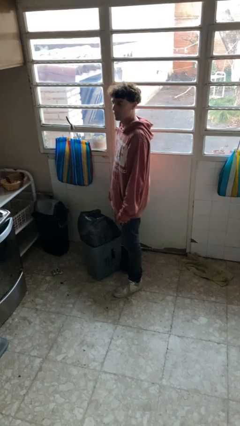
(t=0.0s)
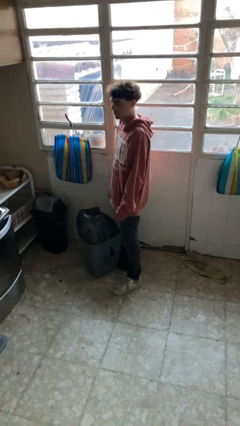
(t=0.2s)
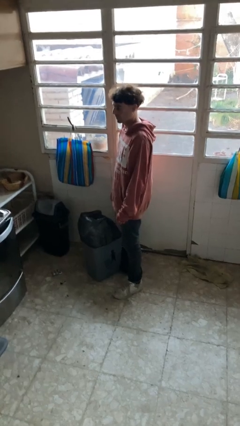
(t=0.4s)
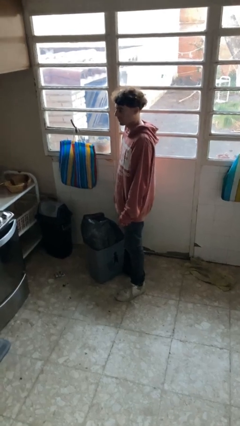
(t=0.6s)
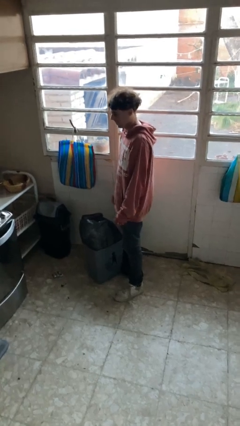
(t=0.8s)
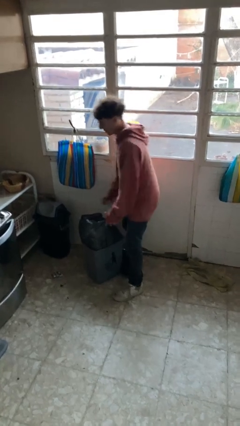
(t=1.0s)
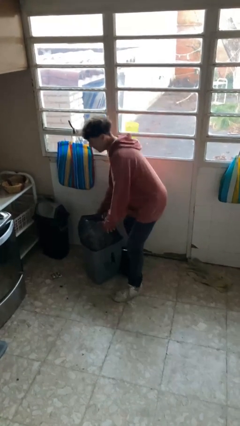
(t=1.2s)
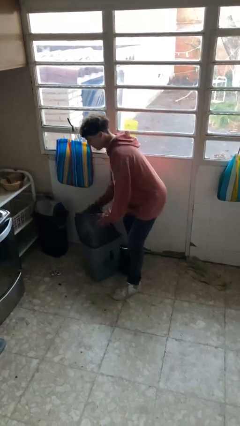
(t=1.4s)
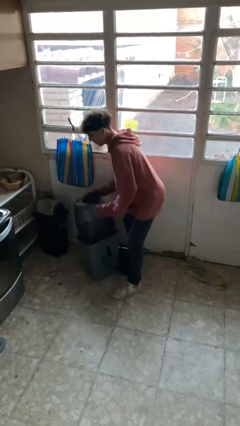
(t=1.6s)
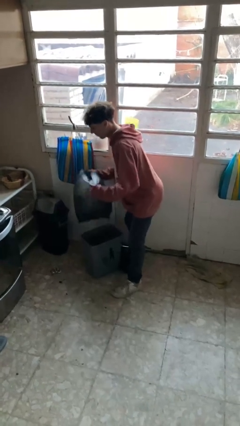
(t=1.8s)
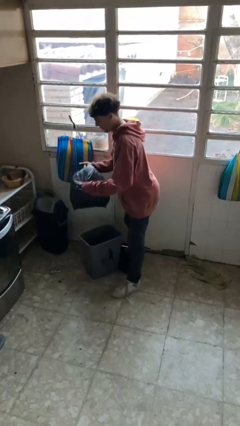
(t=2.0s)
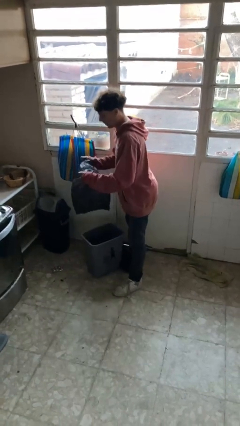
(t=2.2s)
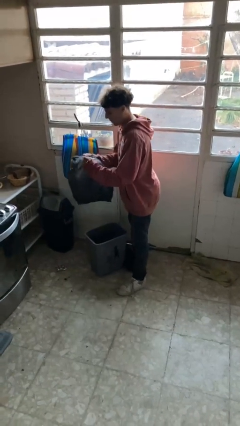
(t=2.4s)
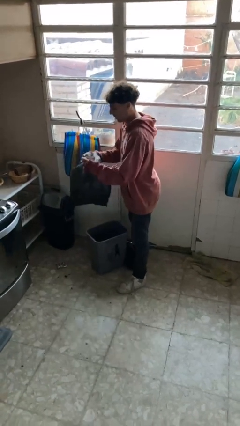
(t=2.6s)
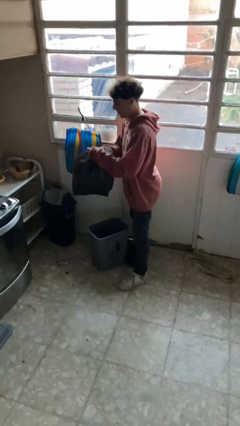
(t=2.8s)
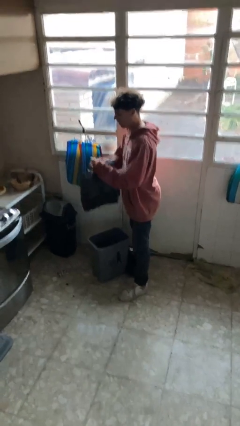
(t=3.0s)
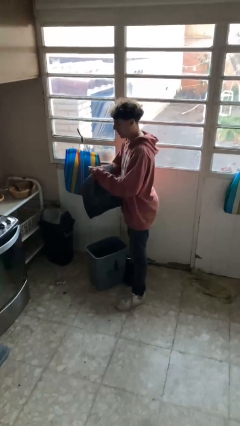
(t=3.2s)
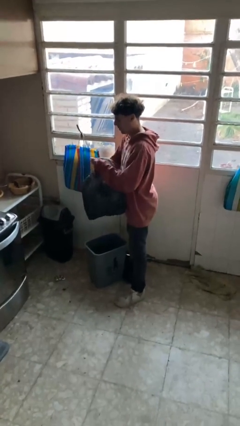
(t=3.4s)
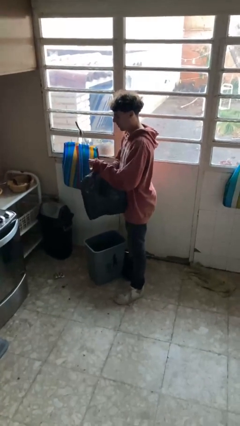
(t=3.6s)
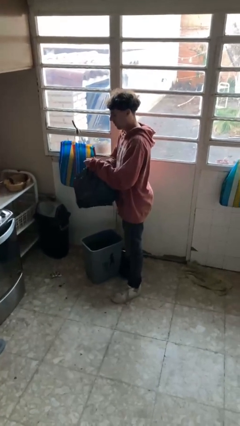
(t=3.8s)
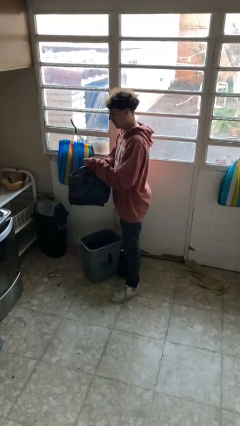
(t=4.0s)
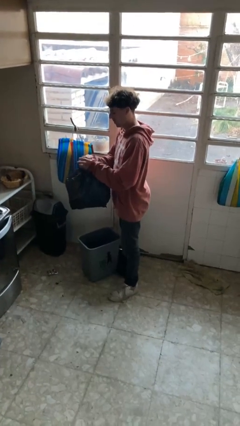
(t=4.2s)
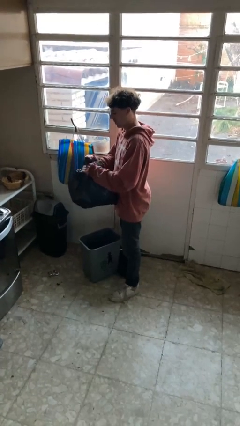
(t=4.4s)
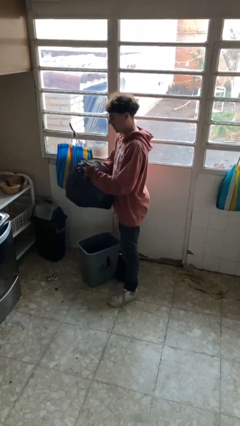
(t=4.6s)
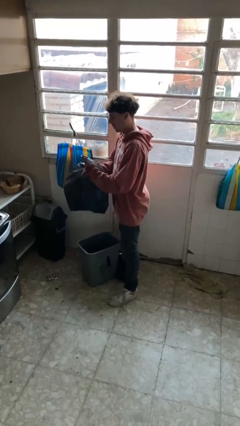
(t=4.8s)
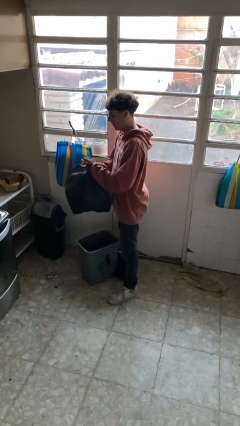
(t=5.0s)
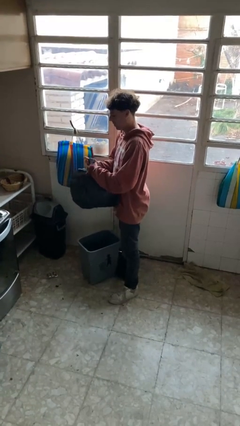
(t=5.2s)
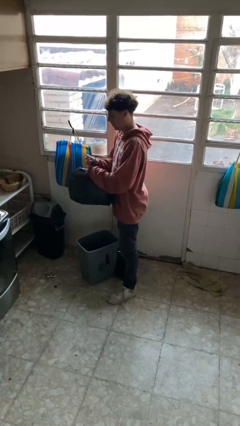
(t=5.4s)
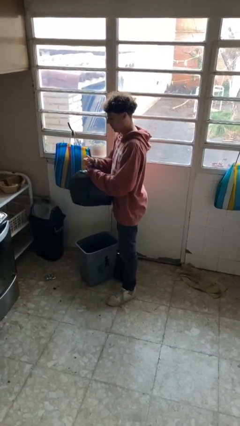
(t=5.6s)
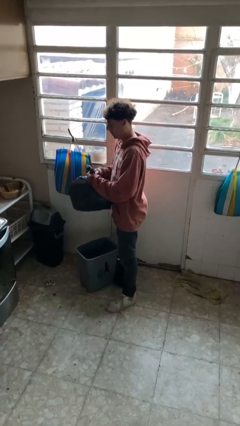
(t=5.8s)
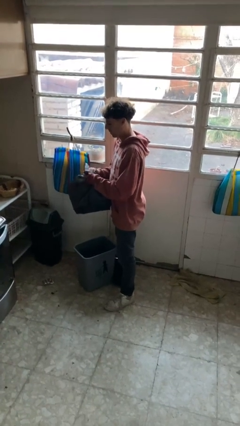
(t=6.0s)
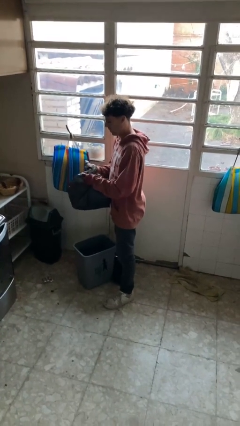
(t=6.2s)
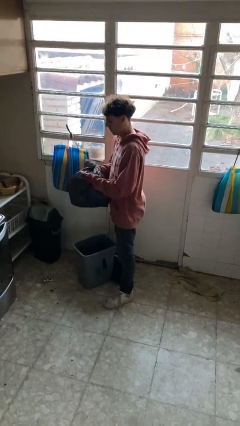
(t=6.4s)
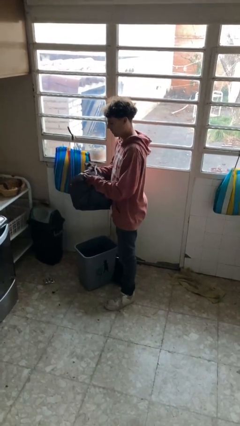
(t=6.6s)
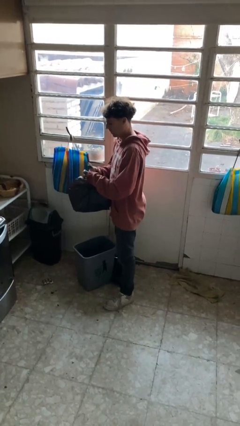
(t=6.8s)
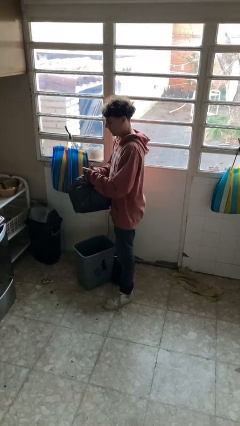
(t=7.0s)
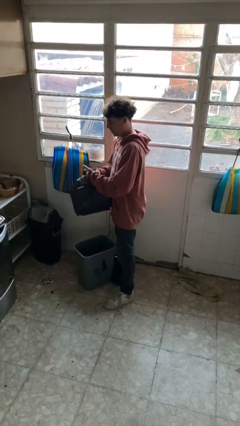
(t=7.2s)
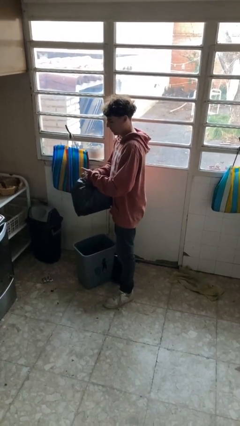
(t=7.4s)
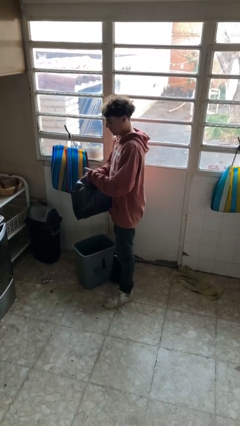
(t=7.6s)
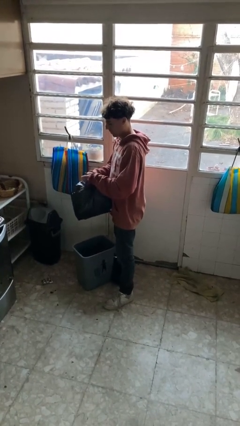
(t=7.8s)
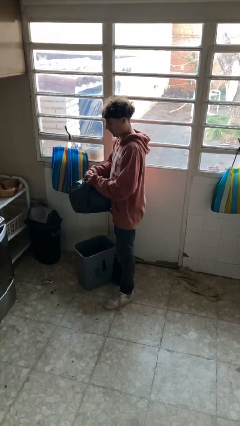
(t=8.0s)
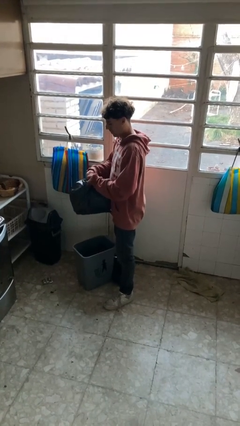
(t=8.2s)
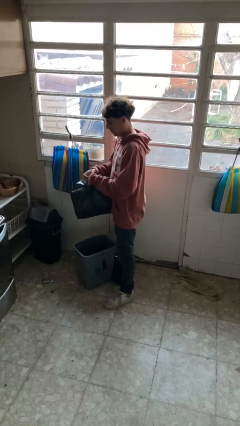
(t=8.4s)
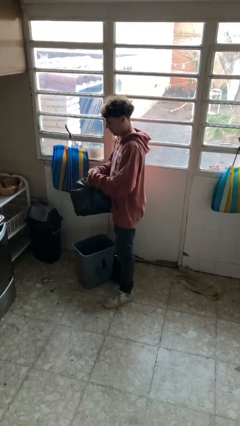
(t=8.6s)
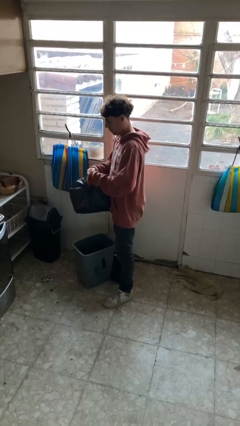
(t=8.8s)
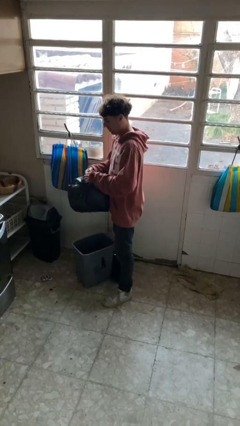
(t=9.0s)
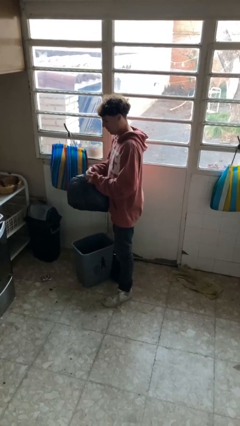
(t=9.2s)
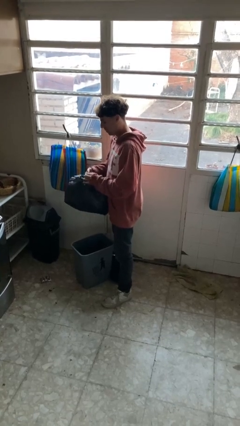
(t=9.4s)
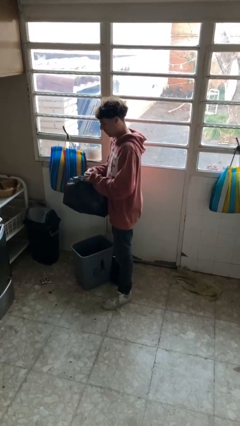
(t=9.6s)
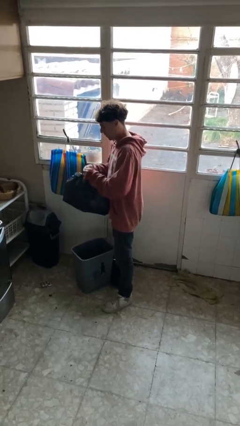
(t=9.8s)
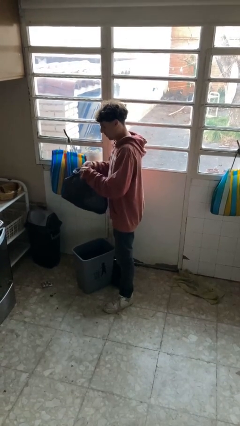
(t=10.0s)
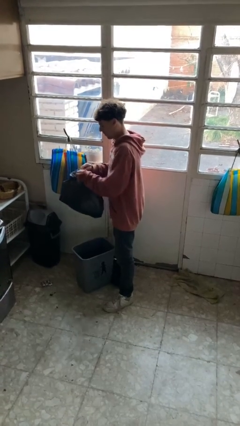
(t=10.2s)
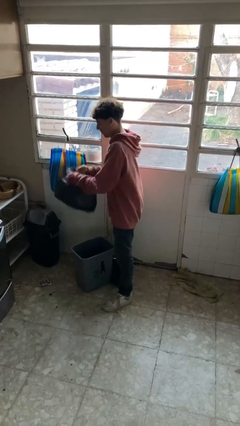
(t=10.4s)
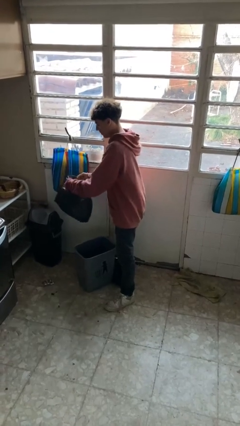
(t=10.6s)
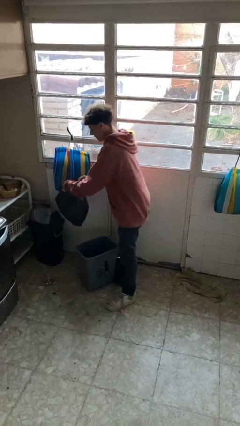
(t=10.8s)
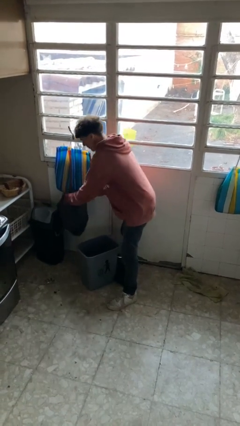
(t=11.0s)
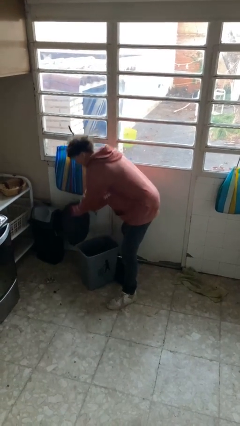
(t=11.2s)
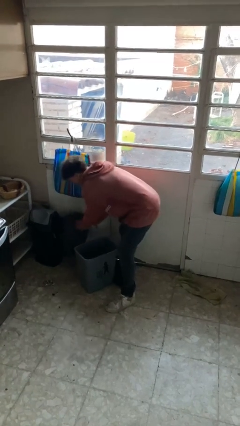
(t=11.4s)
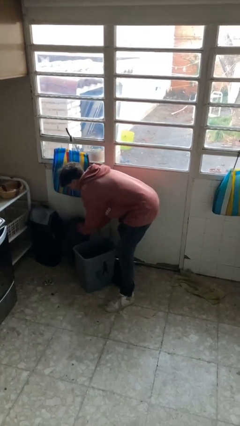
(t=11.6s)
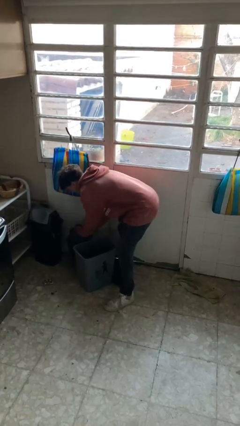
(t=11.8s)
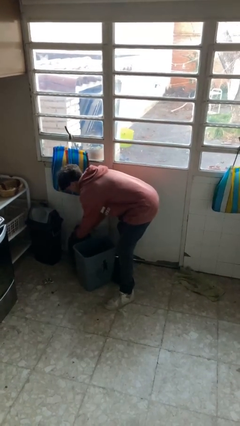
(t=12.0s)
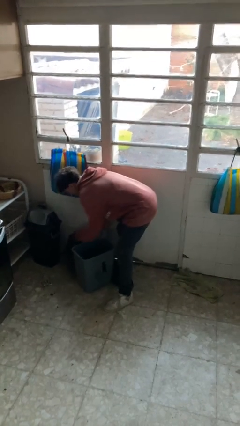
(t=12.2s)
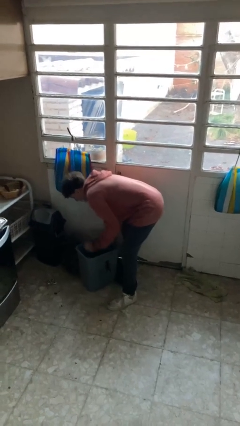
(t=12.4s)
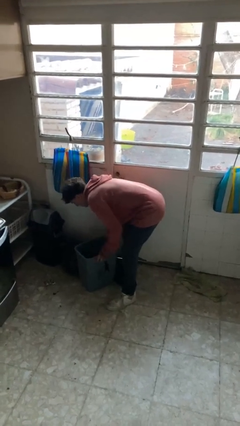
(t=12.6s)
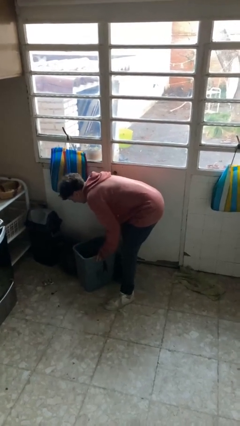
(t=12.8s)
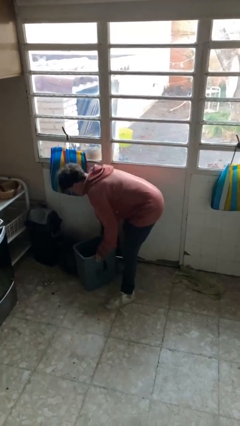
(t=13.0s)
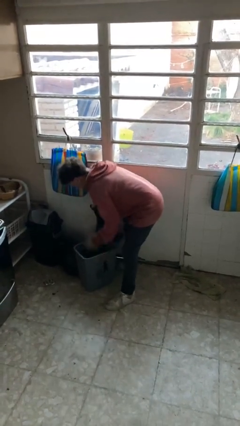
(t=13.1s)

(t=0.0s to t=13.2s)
person removes trashbag from trashcan

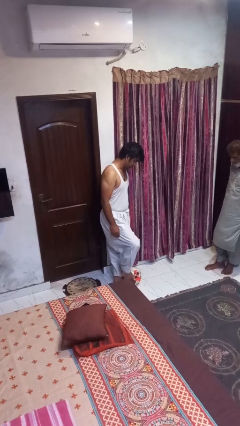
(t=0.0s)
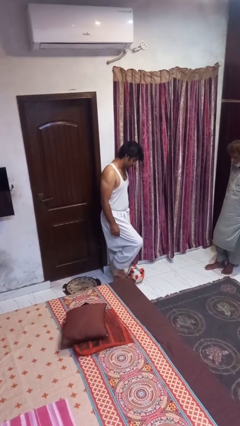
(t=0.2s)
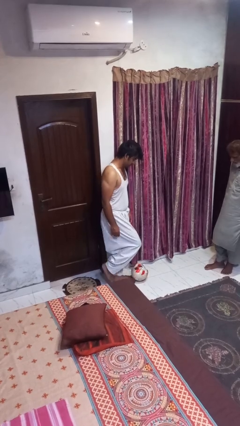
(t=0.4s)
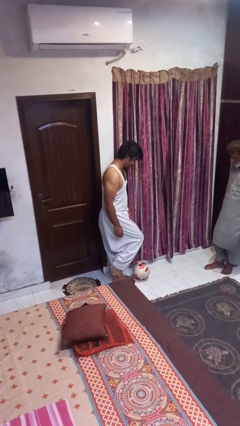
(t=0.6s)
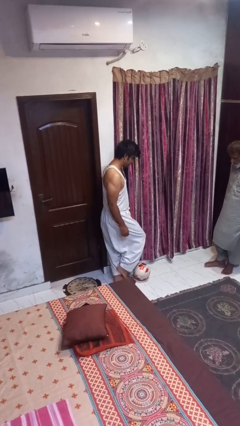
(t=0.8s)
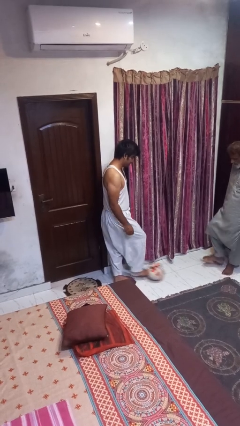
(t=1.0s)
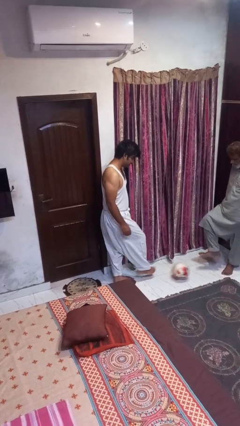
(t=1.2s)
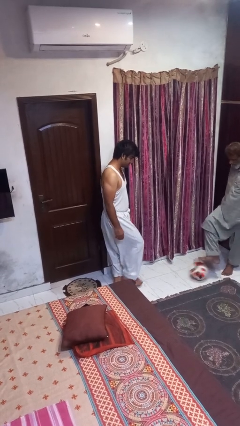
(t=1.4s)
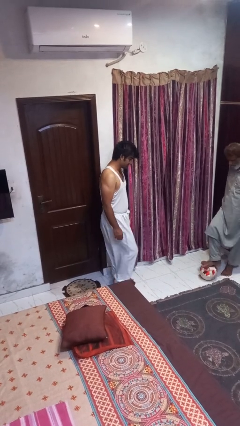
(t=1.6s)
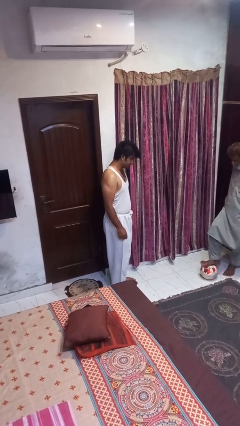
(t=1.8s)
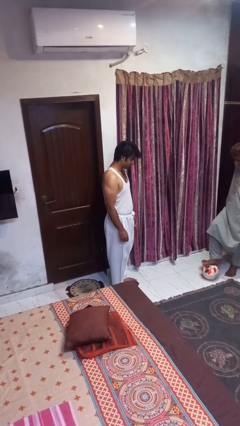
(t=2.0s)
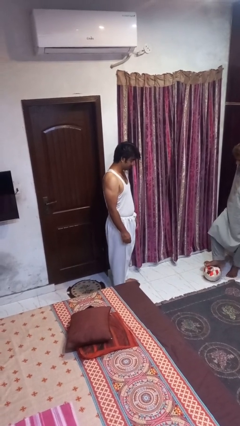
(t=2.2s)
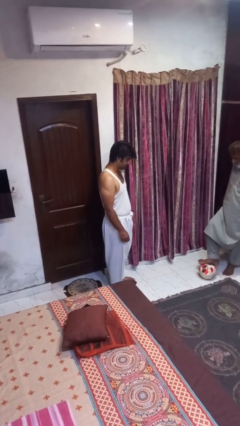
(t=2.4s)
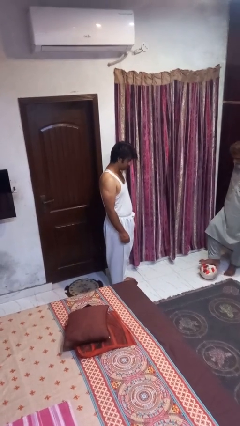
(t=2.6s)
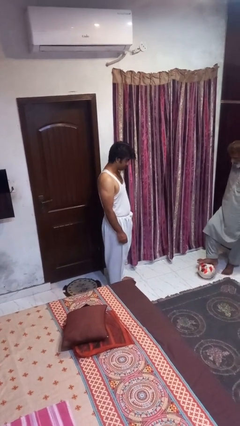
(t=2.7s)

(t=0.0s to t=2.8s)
person kicks object to person

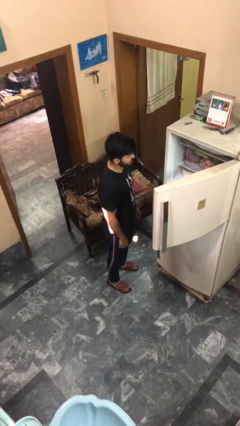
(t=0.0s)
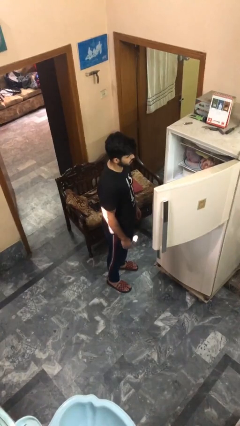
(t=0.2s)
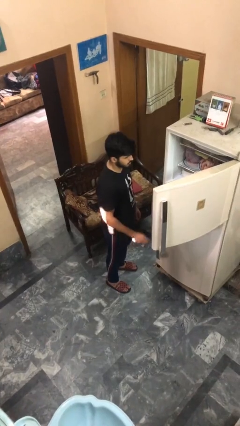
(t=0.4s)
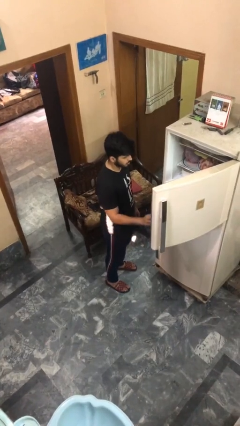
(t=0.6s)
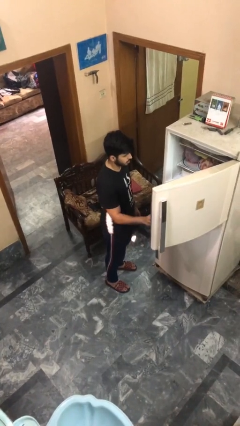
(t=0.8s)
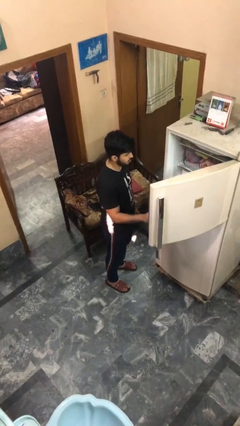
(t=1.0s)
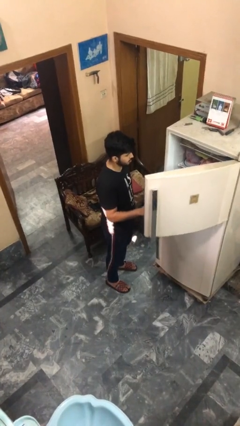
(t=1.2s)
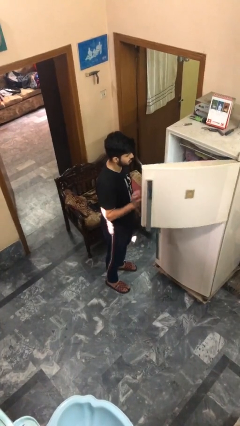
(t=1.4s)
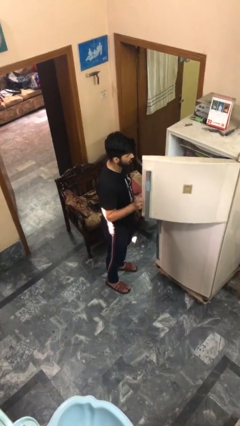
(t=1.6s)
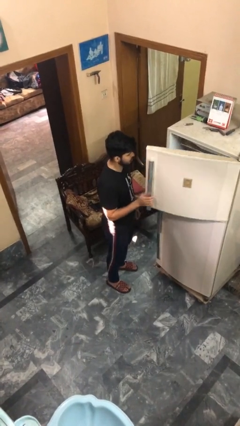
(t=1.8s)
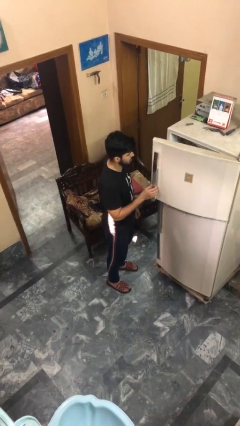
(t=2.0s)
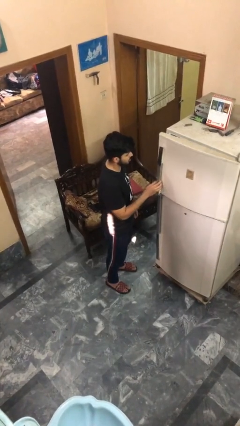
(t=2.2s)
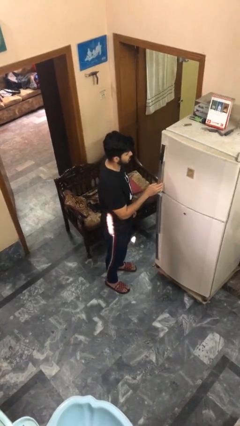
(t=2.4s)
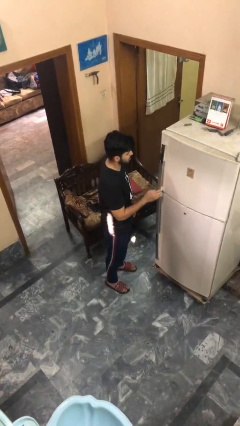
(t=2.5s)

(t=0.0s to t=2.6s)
person closes refrigerator
